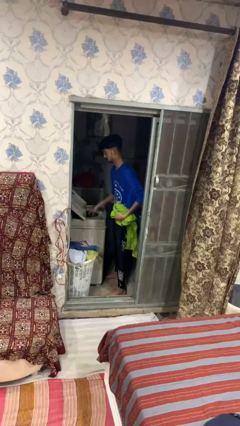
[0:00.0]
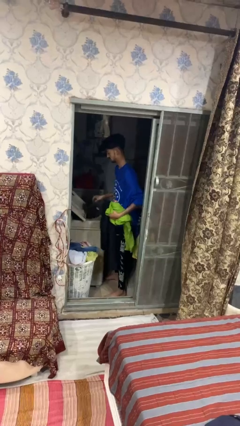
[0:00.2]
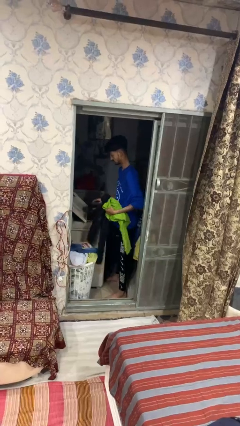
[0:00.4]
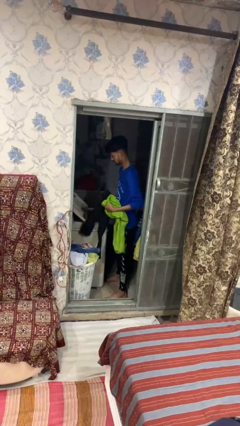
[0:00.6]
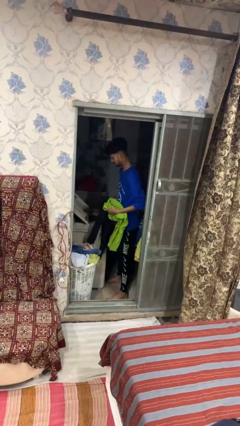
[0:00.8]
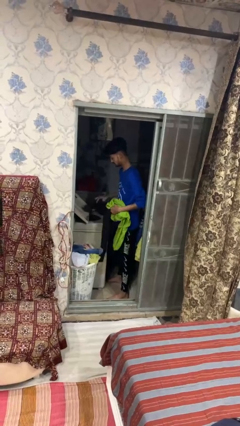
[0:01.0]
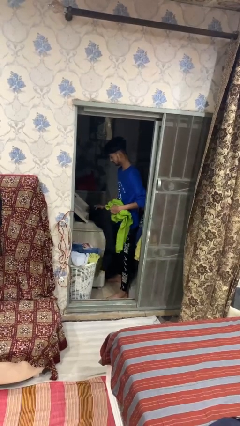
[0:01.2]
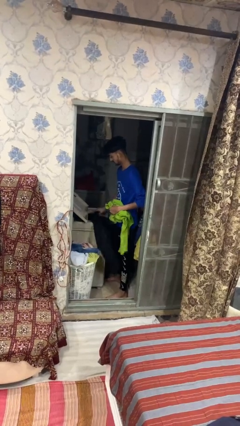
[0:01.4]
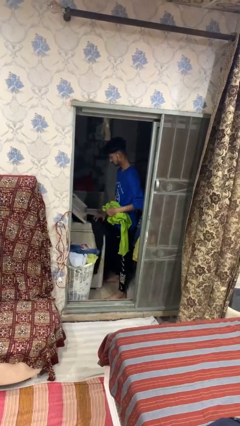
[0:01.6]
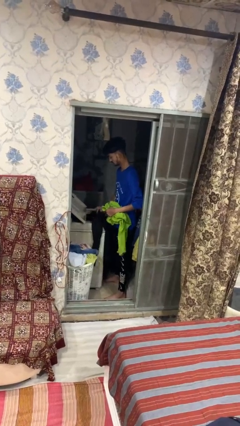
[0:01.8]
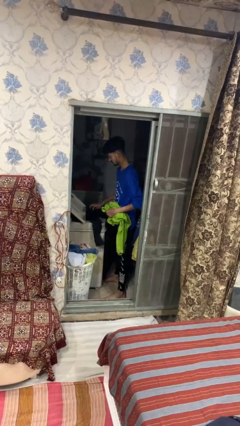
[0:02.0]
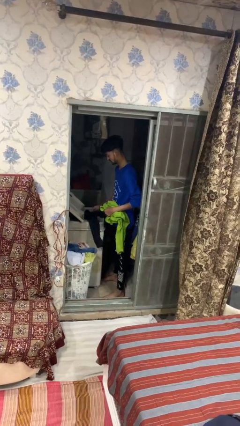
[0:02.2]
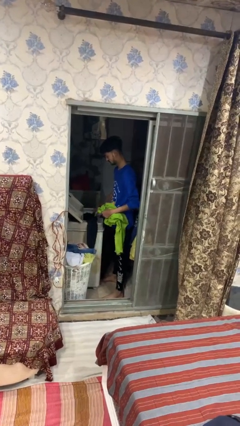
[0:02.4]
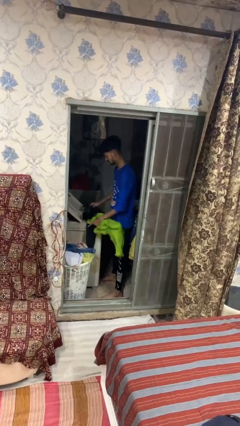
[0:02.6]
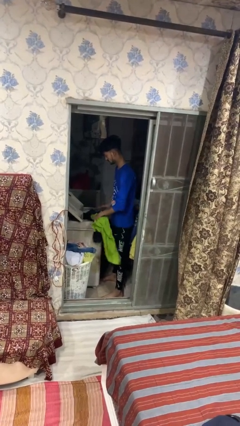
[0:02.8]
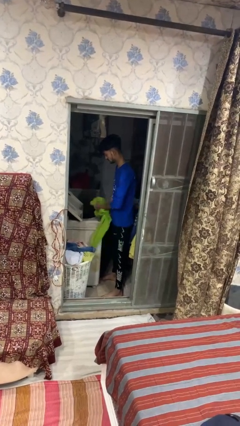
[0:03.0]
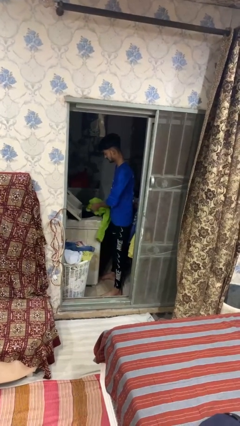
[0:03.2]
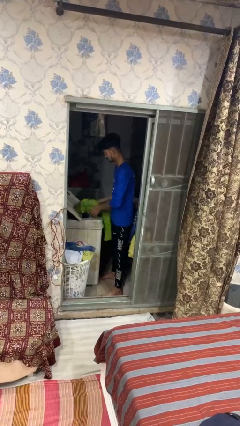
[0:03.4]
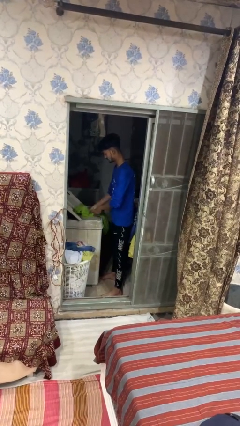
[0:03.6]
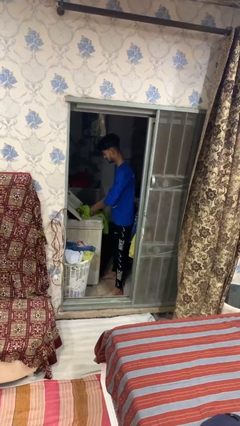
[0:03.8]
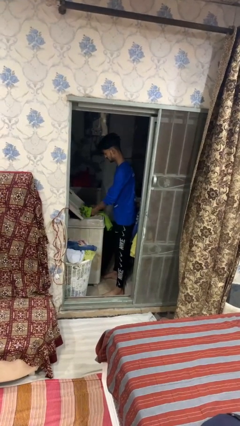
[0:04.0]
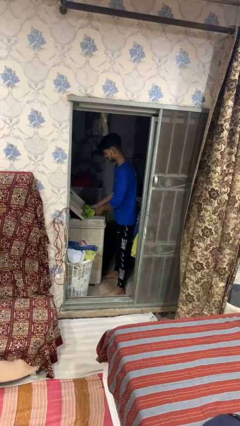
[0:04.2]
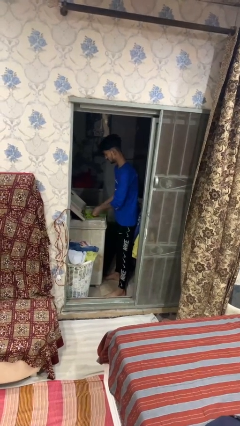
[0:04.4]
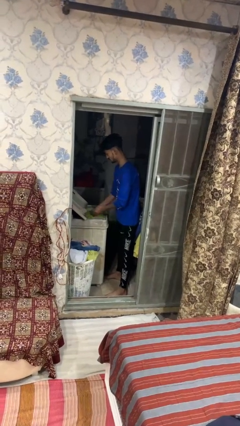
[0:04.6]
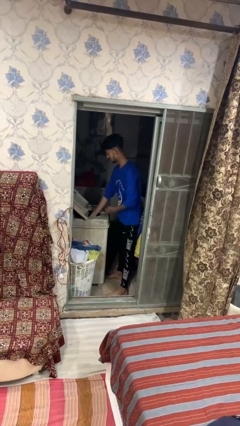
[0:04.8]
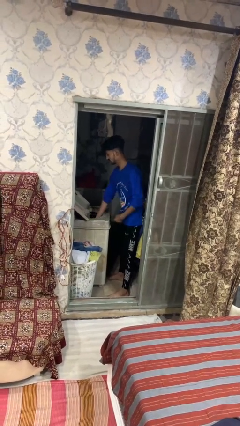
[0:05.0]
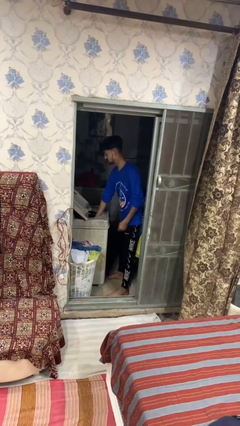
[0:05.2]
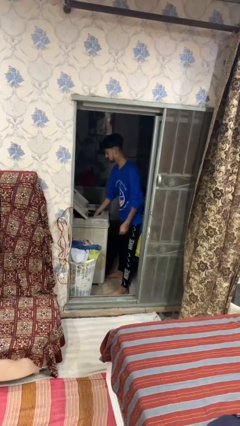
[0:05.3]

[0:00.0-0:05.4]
person loads clotheswasher

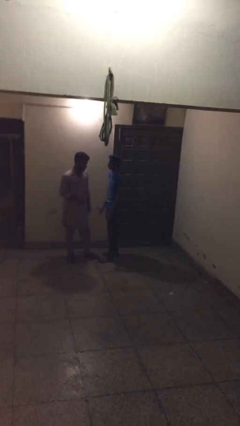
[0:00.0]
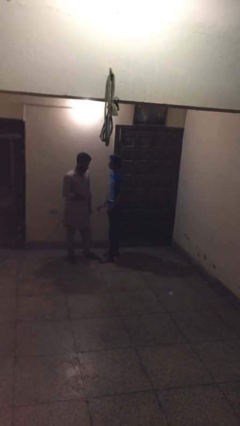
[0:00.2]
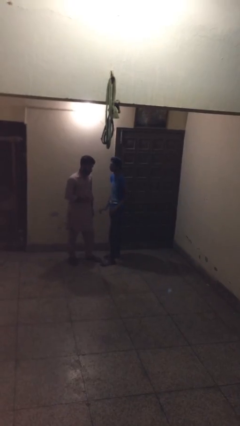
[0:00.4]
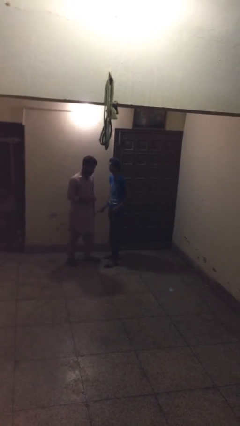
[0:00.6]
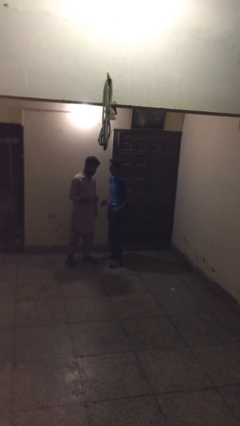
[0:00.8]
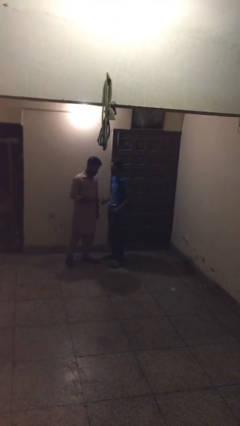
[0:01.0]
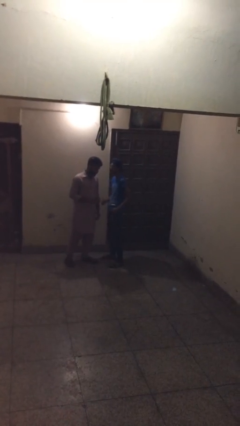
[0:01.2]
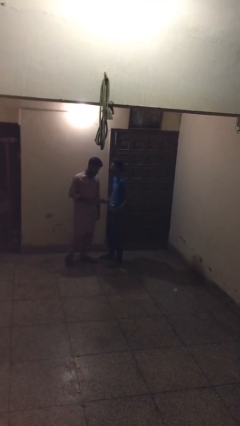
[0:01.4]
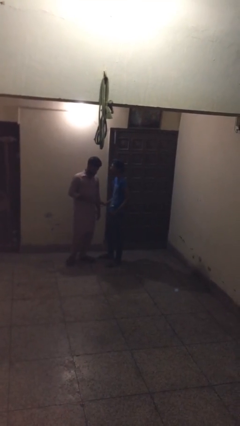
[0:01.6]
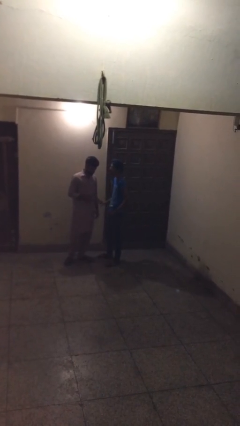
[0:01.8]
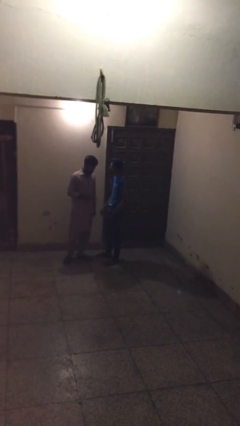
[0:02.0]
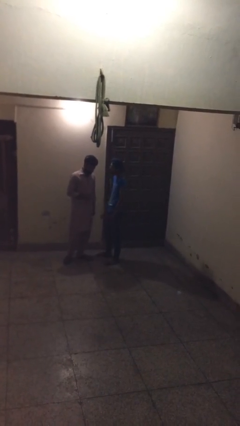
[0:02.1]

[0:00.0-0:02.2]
person talks to person

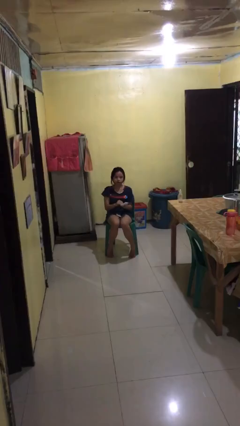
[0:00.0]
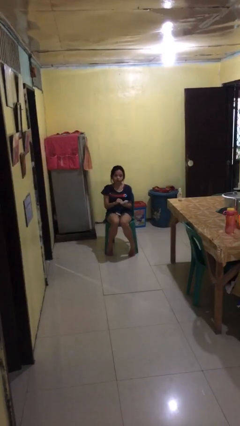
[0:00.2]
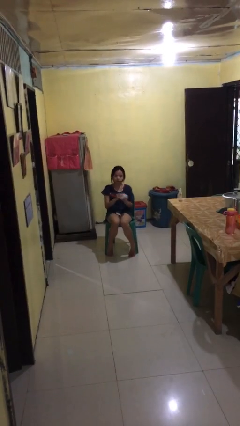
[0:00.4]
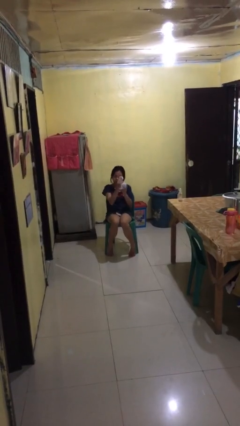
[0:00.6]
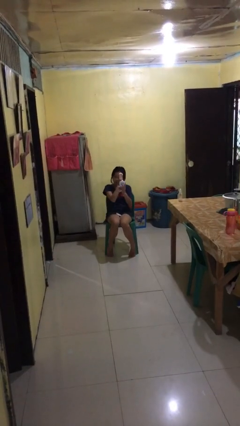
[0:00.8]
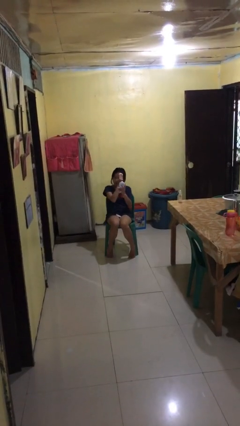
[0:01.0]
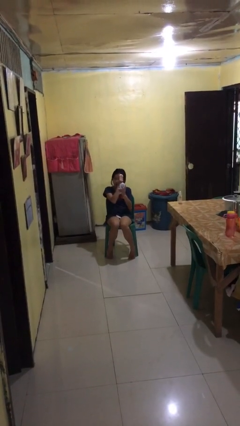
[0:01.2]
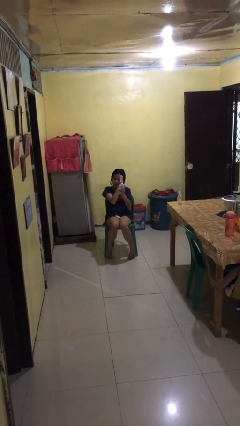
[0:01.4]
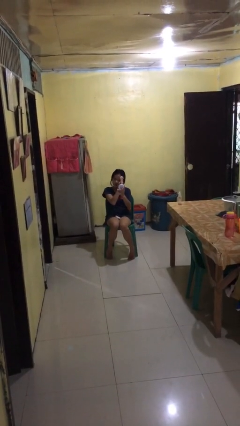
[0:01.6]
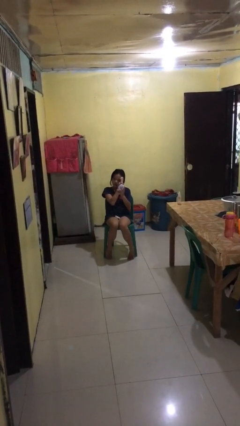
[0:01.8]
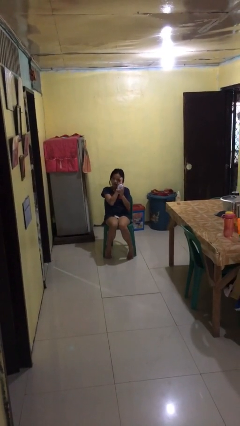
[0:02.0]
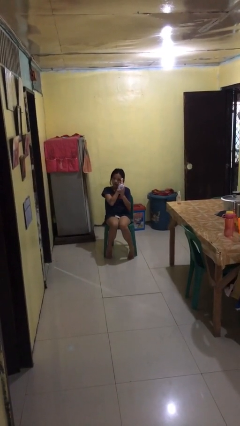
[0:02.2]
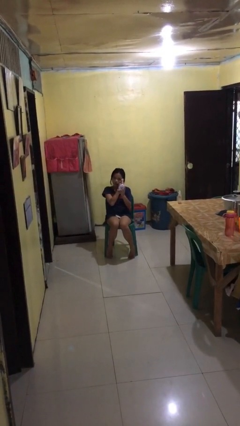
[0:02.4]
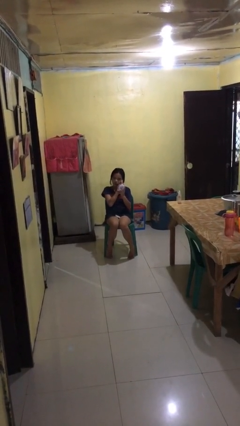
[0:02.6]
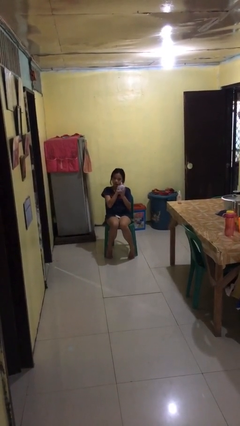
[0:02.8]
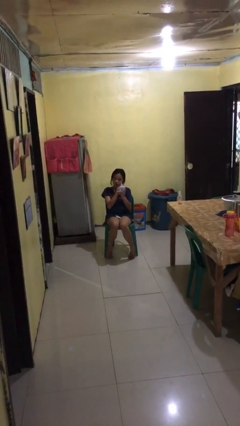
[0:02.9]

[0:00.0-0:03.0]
person applies foundation makeup

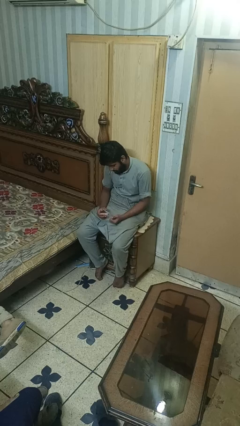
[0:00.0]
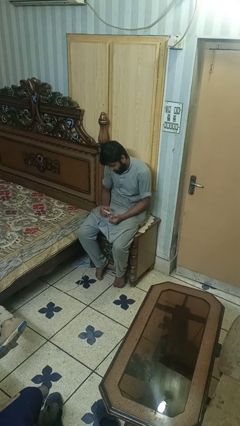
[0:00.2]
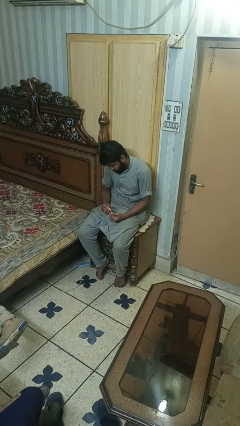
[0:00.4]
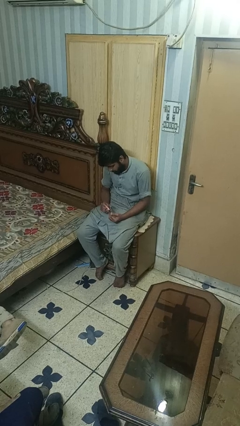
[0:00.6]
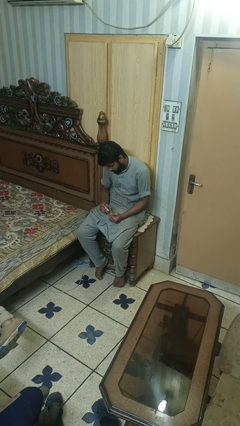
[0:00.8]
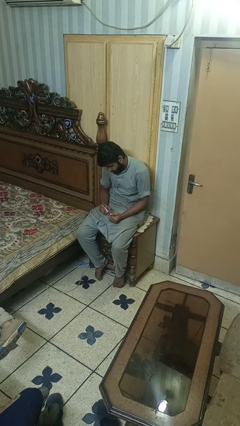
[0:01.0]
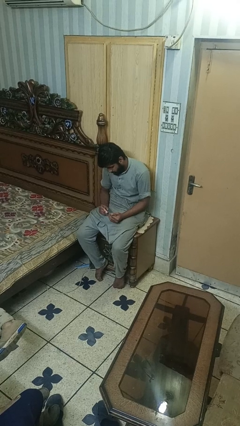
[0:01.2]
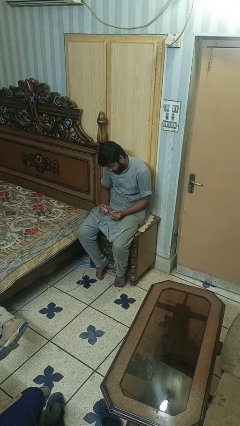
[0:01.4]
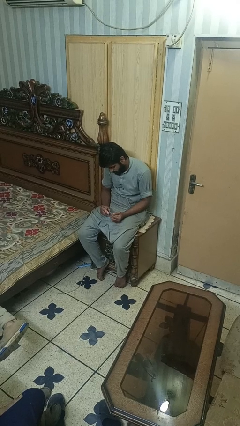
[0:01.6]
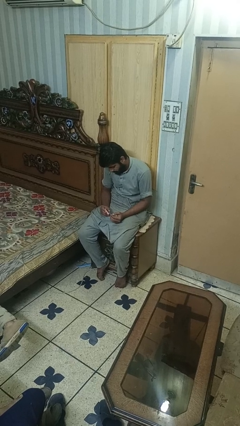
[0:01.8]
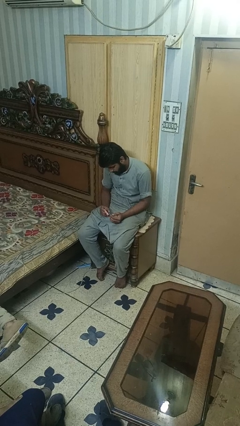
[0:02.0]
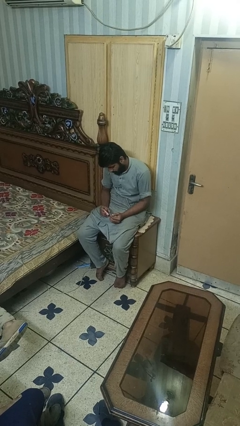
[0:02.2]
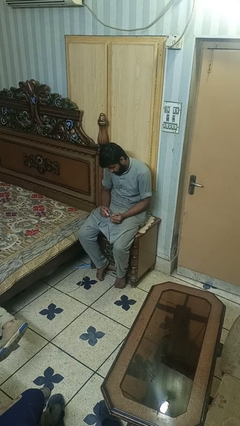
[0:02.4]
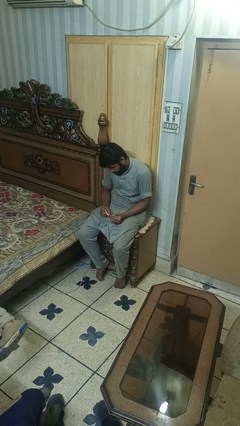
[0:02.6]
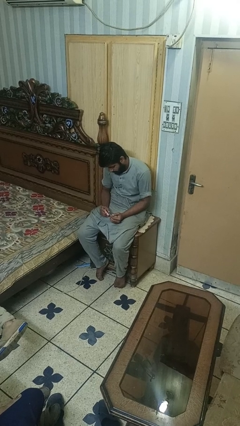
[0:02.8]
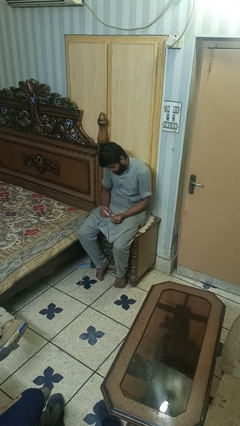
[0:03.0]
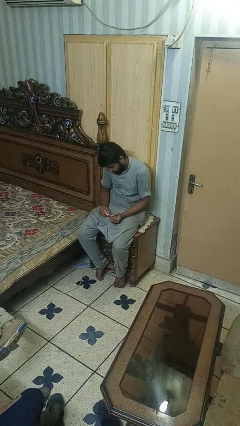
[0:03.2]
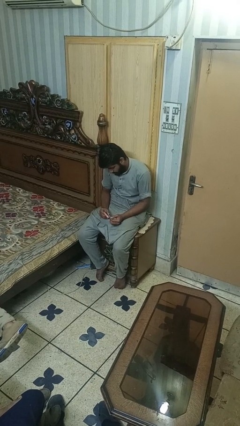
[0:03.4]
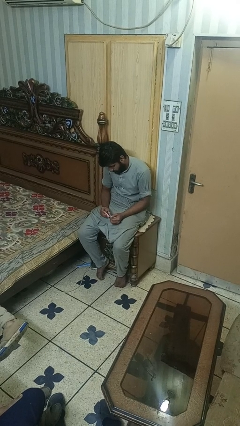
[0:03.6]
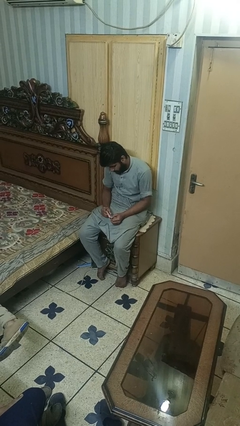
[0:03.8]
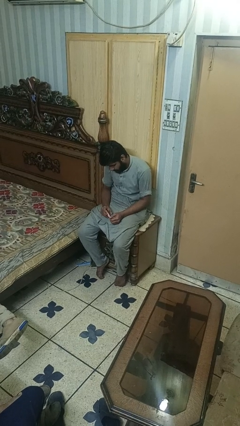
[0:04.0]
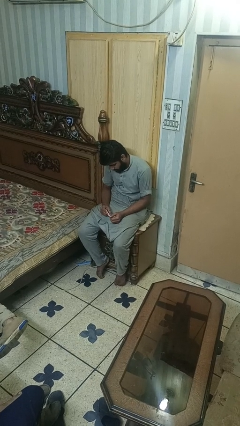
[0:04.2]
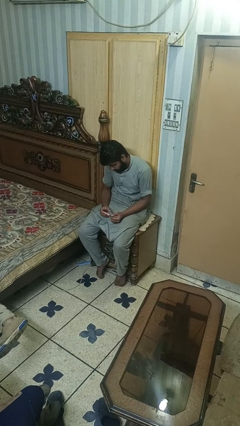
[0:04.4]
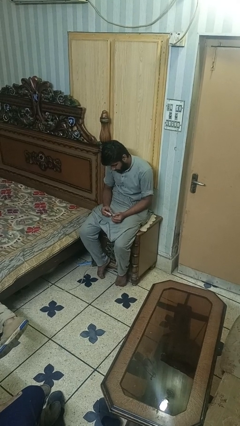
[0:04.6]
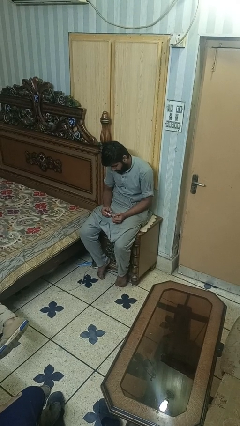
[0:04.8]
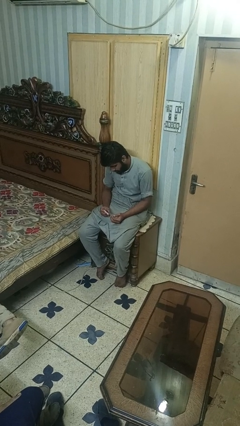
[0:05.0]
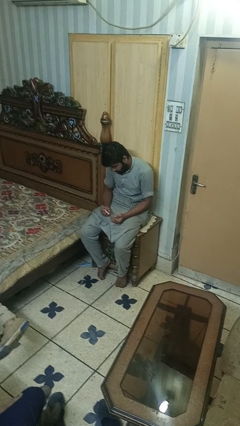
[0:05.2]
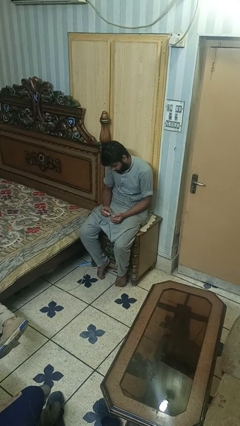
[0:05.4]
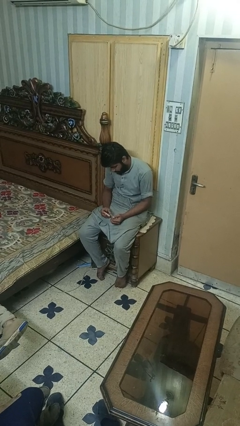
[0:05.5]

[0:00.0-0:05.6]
person clips fingernails

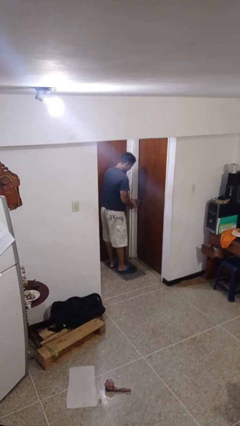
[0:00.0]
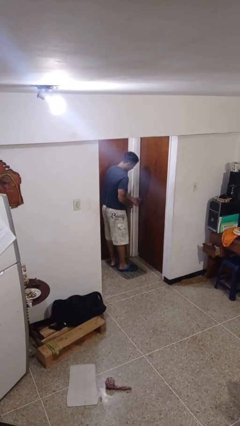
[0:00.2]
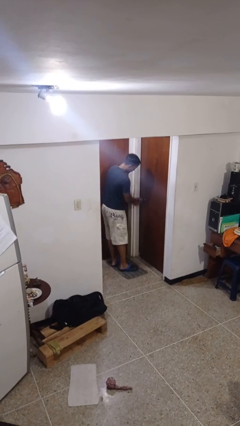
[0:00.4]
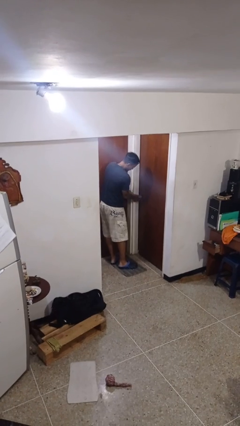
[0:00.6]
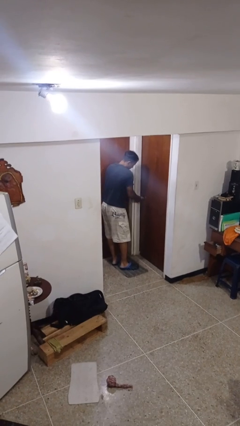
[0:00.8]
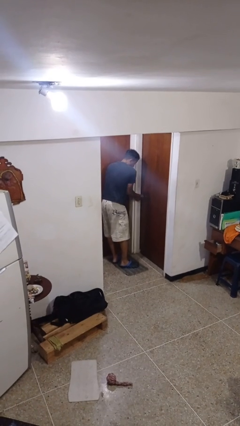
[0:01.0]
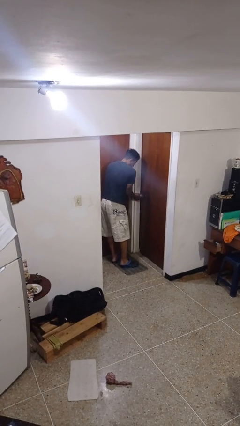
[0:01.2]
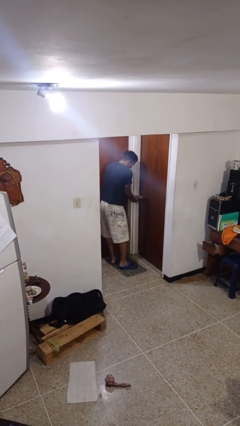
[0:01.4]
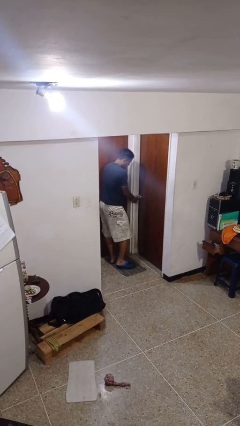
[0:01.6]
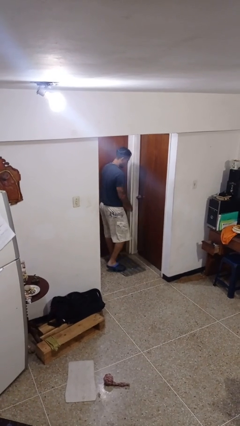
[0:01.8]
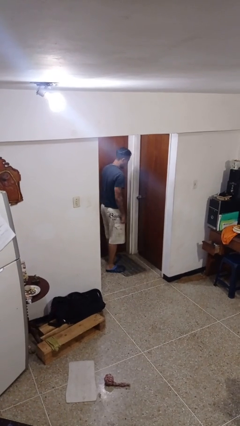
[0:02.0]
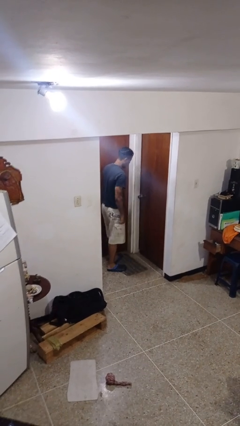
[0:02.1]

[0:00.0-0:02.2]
person locks door with keys
